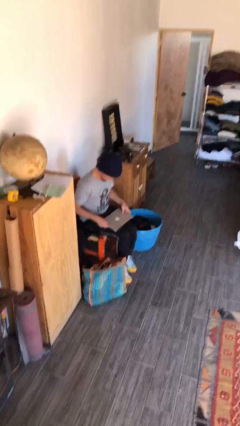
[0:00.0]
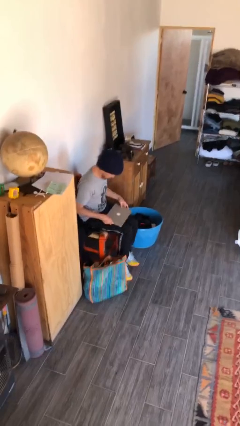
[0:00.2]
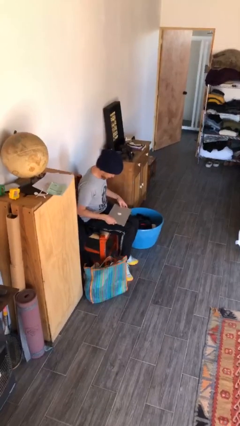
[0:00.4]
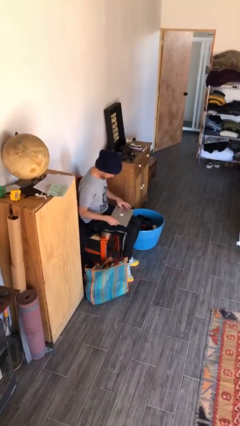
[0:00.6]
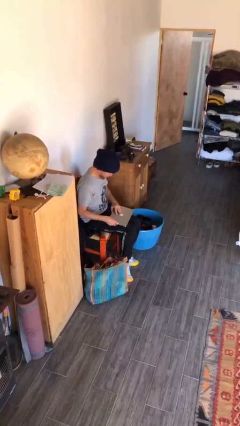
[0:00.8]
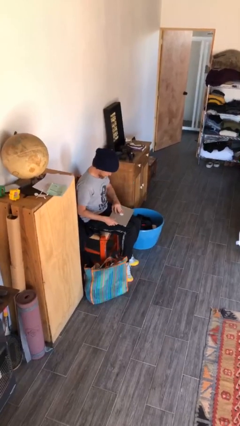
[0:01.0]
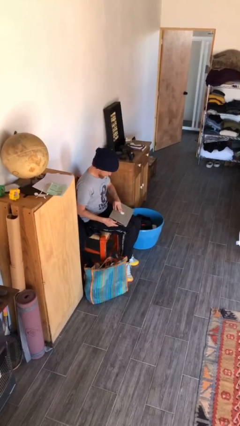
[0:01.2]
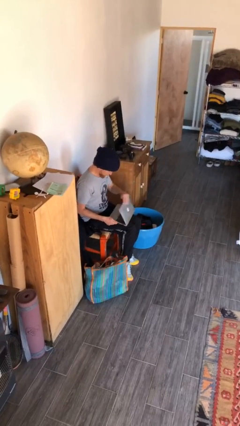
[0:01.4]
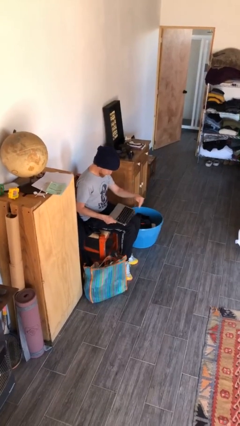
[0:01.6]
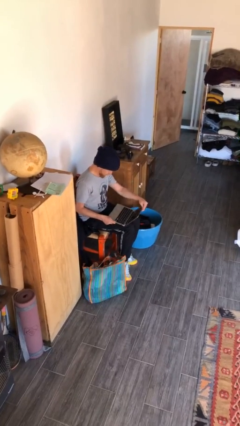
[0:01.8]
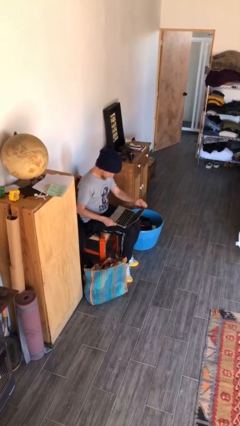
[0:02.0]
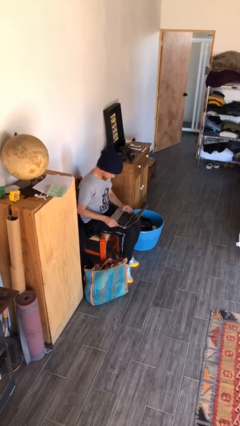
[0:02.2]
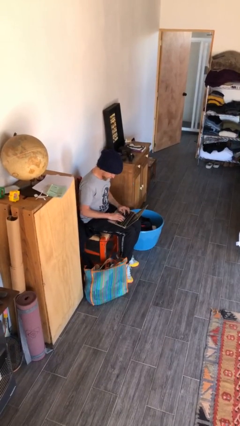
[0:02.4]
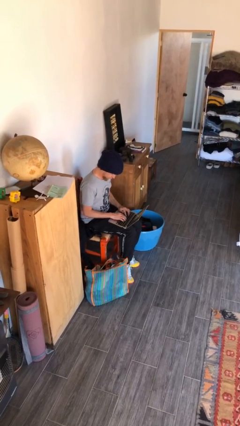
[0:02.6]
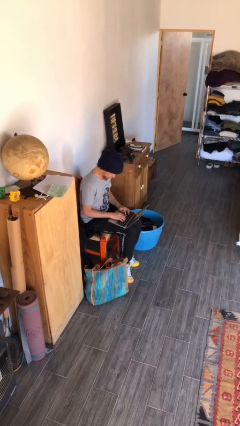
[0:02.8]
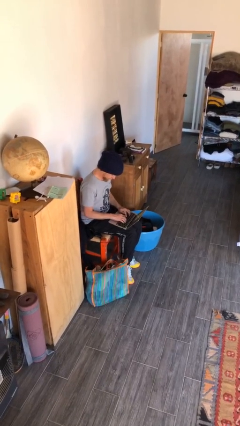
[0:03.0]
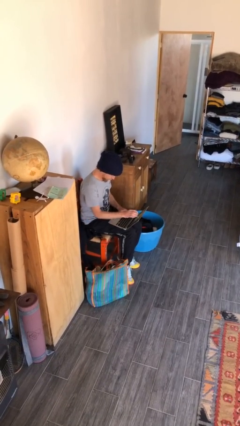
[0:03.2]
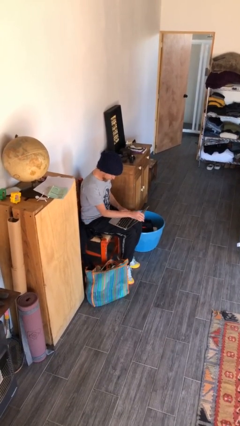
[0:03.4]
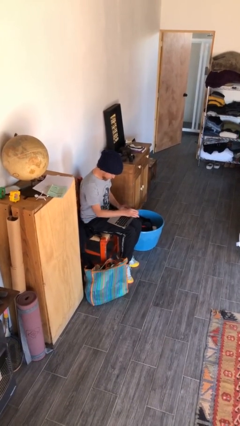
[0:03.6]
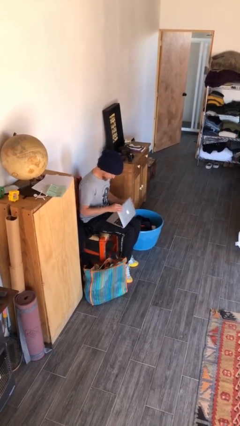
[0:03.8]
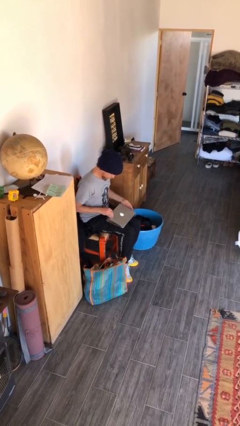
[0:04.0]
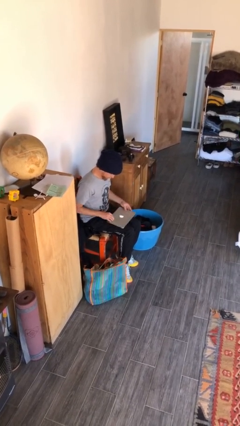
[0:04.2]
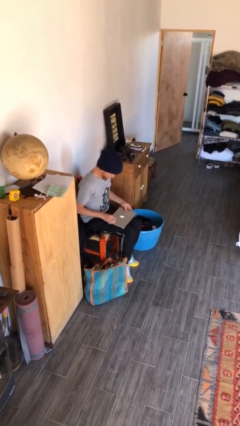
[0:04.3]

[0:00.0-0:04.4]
person interacts with laptop

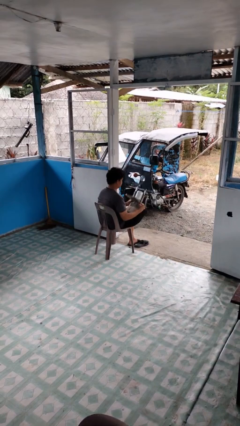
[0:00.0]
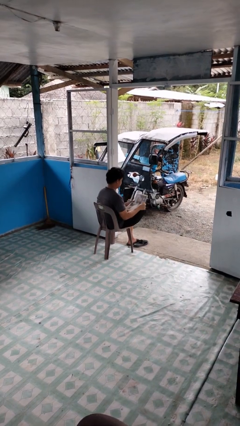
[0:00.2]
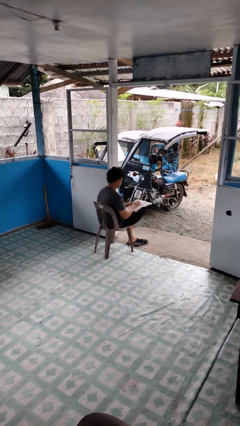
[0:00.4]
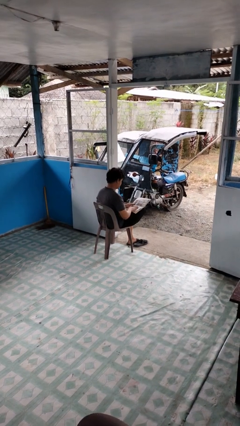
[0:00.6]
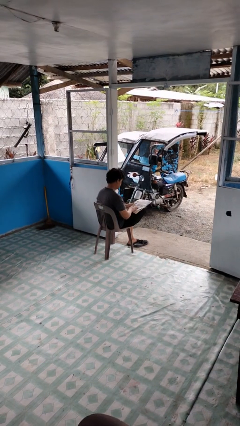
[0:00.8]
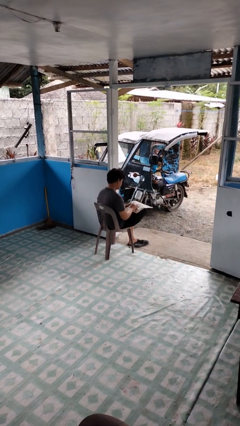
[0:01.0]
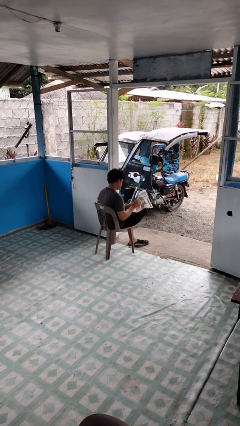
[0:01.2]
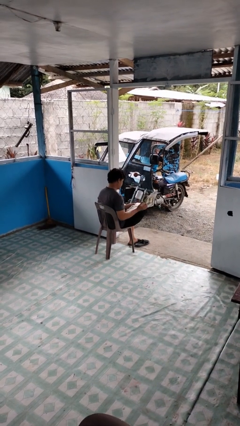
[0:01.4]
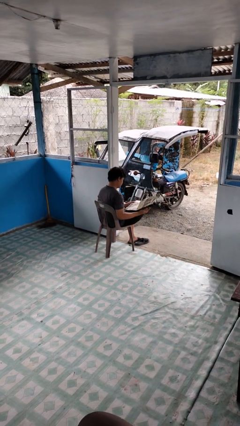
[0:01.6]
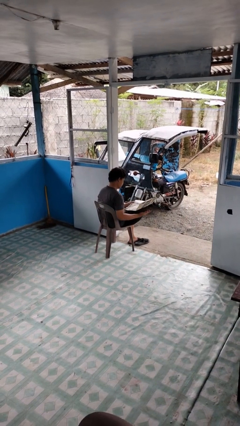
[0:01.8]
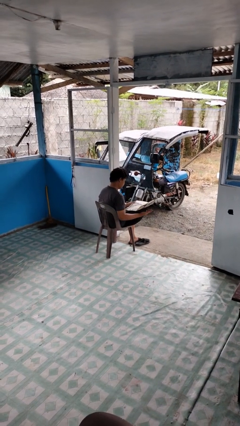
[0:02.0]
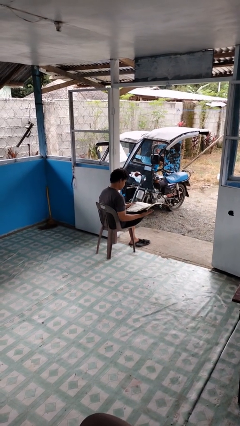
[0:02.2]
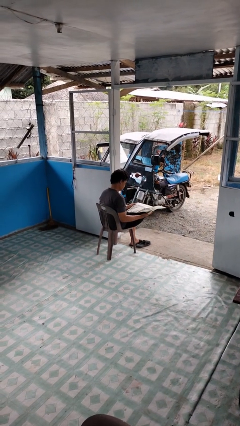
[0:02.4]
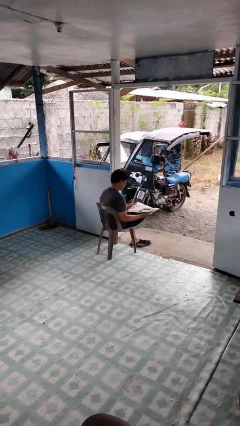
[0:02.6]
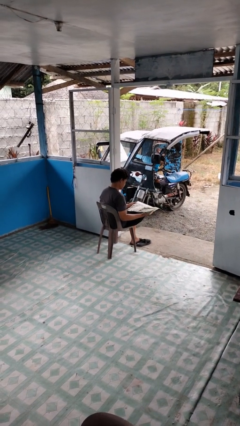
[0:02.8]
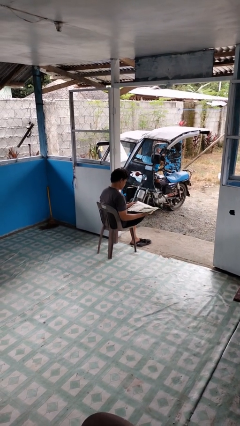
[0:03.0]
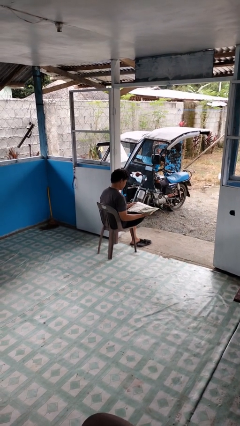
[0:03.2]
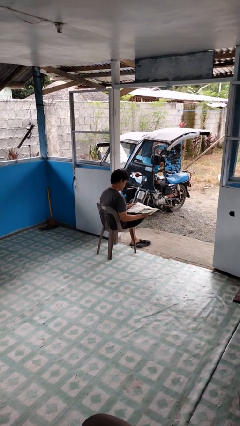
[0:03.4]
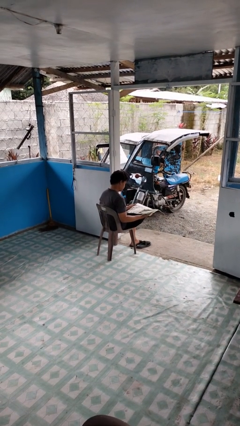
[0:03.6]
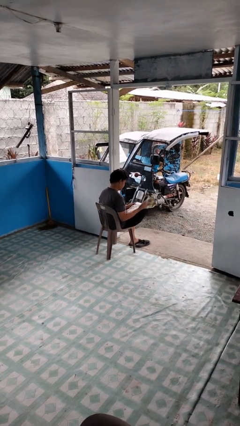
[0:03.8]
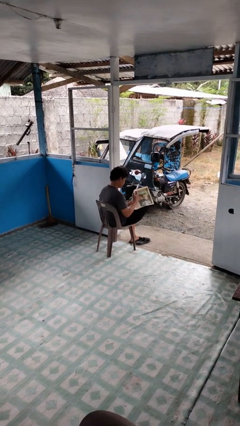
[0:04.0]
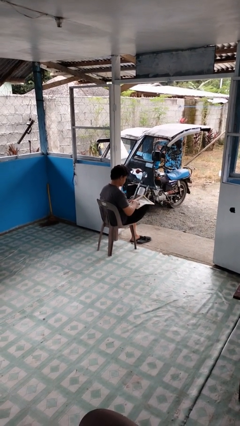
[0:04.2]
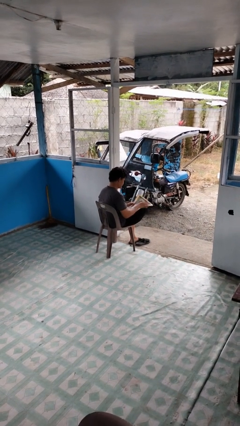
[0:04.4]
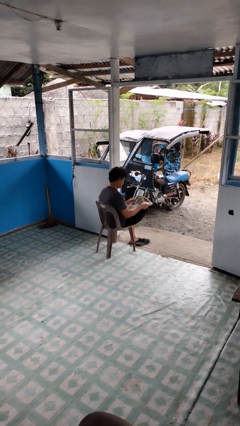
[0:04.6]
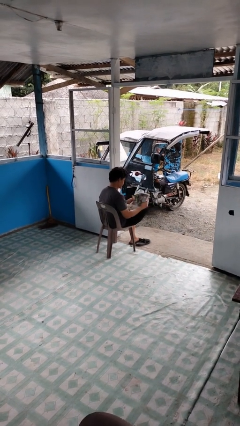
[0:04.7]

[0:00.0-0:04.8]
person reads newspaper

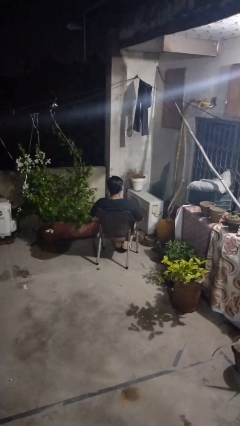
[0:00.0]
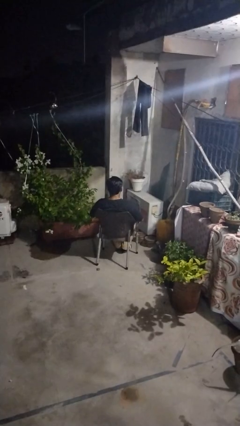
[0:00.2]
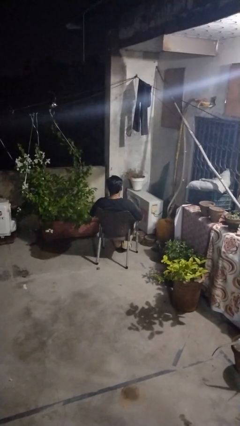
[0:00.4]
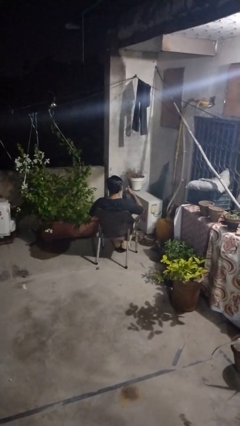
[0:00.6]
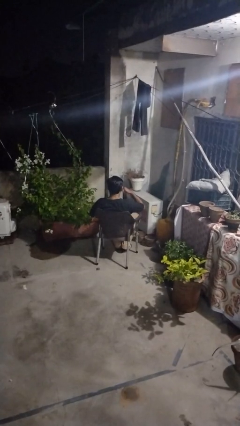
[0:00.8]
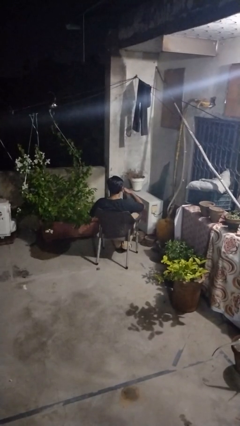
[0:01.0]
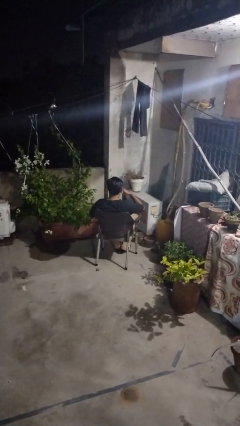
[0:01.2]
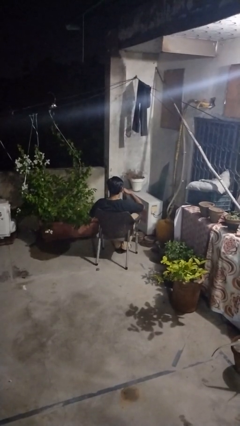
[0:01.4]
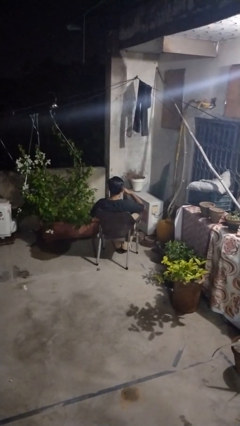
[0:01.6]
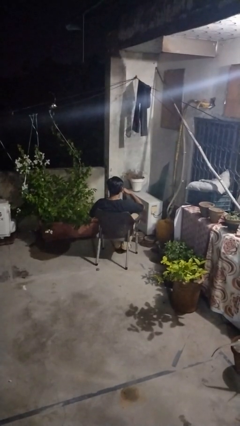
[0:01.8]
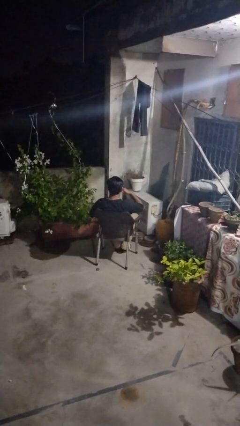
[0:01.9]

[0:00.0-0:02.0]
person gestures call me

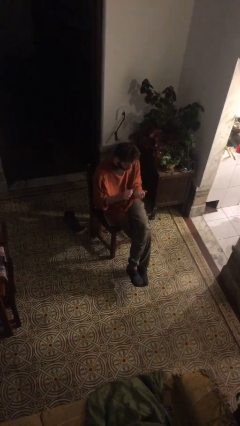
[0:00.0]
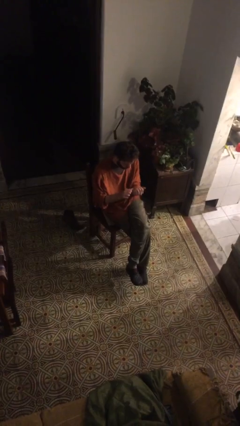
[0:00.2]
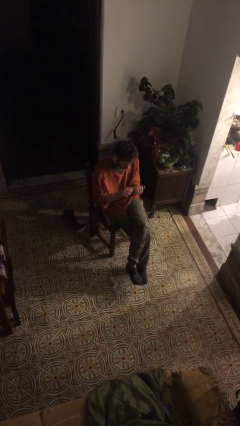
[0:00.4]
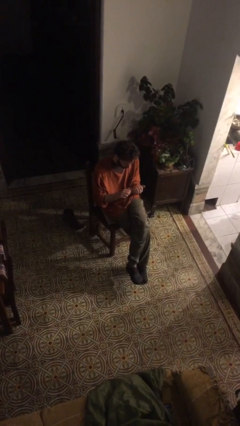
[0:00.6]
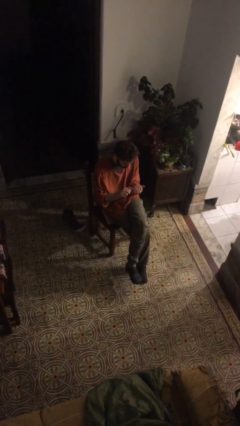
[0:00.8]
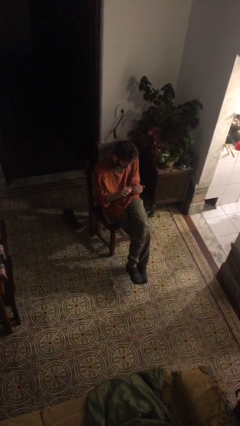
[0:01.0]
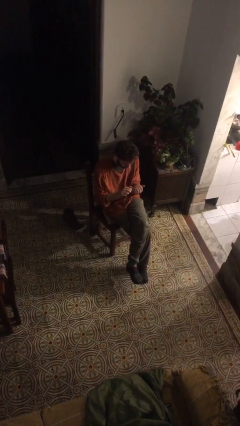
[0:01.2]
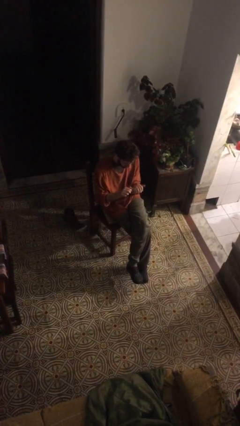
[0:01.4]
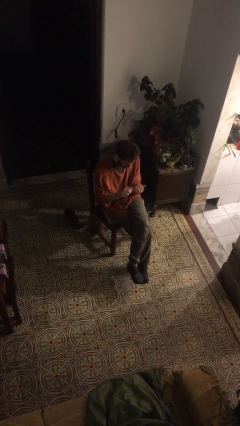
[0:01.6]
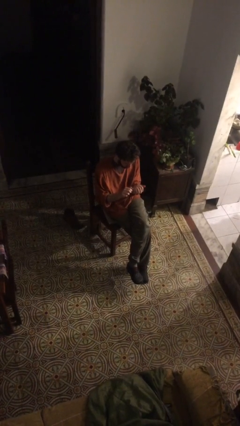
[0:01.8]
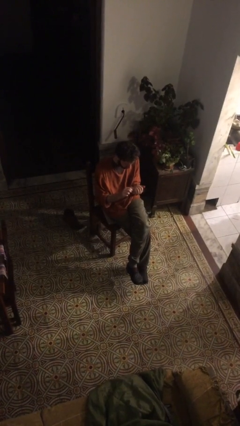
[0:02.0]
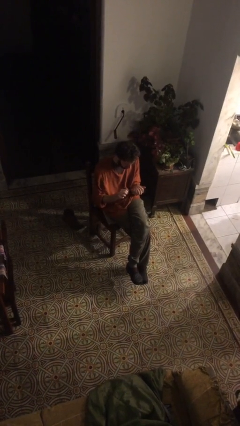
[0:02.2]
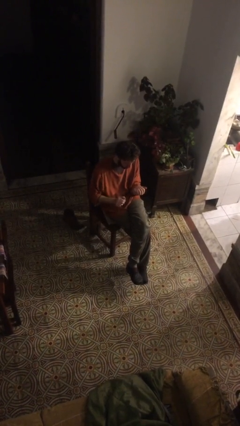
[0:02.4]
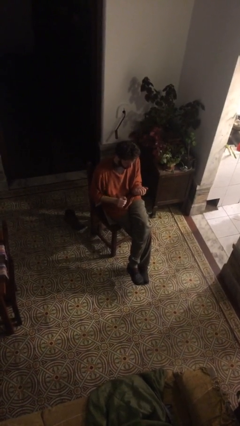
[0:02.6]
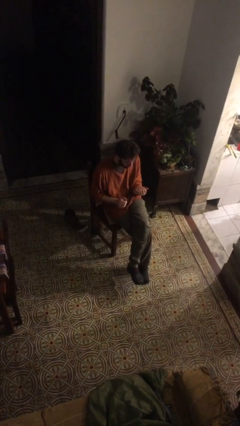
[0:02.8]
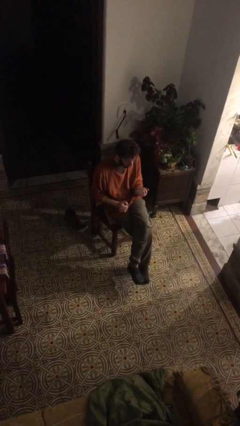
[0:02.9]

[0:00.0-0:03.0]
person files fingernails

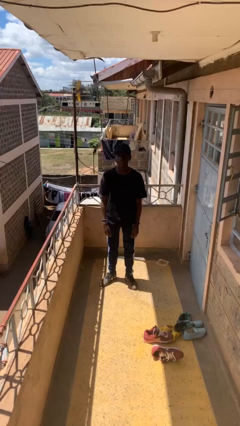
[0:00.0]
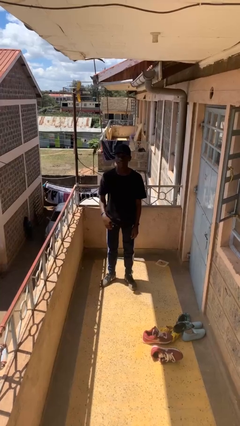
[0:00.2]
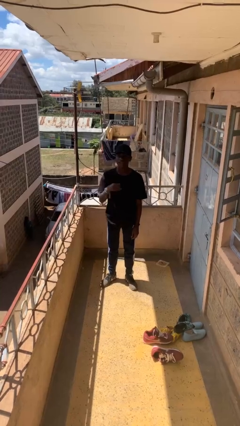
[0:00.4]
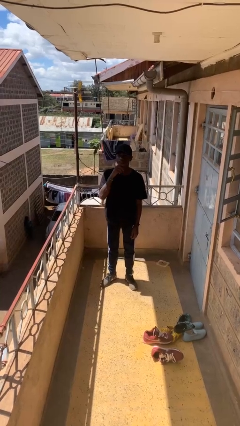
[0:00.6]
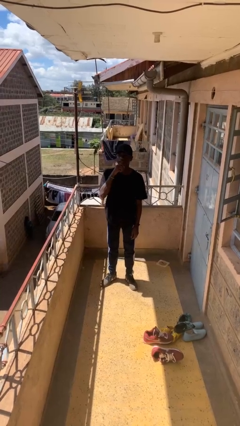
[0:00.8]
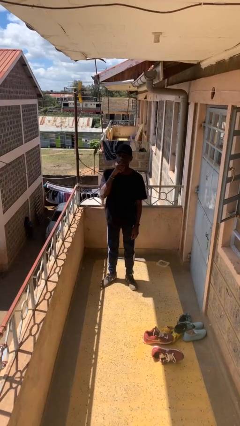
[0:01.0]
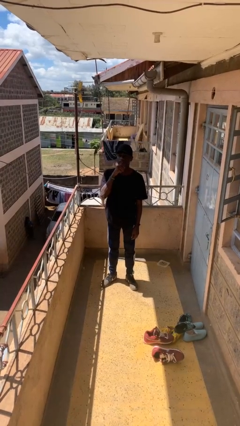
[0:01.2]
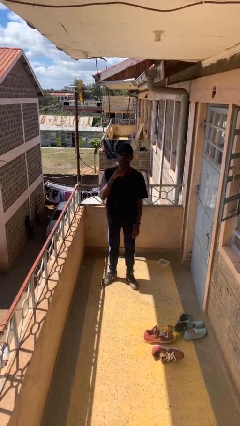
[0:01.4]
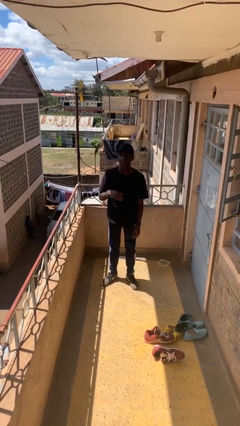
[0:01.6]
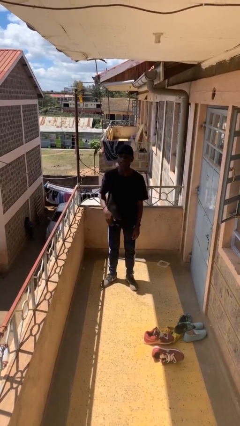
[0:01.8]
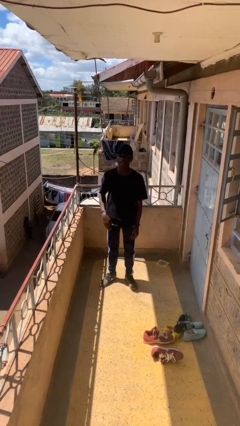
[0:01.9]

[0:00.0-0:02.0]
person strokes chin

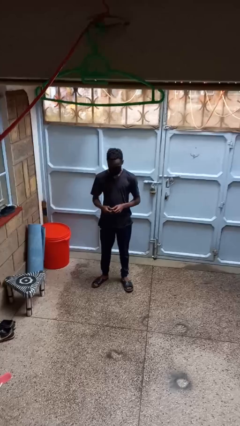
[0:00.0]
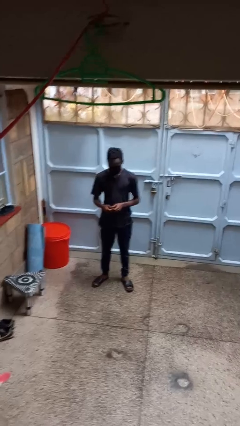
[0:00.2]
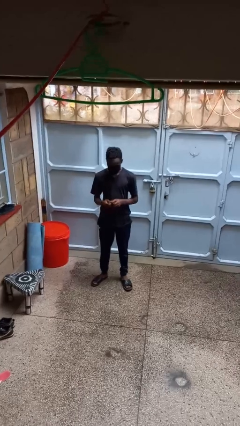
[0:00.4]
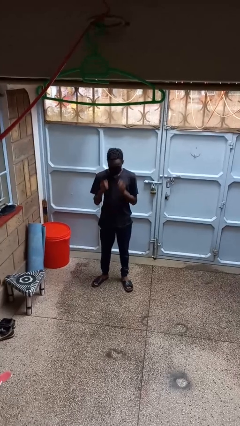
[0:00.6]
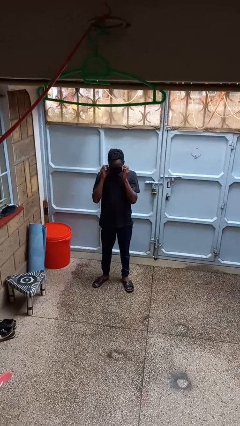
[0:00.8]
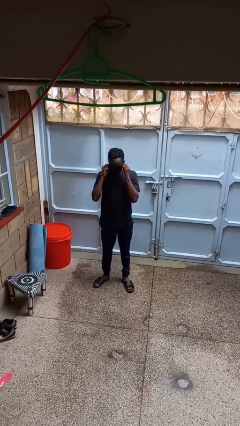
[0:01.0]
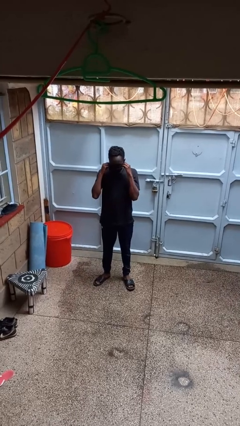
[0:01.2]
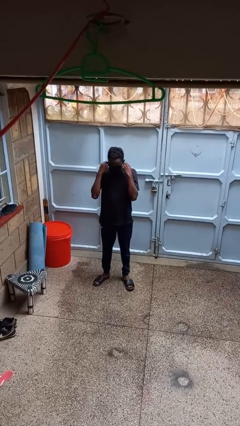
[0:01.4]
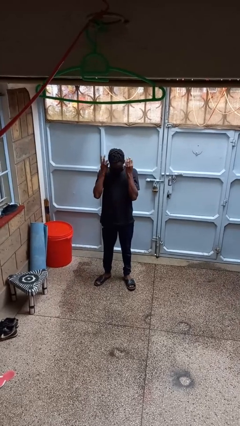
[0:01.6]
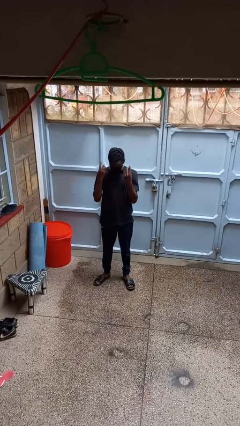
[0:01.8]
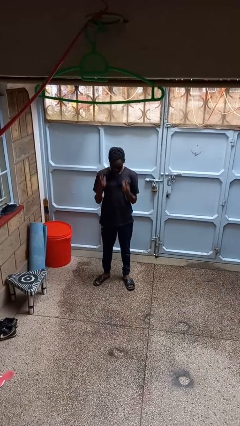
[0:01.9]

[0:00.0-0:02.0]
person takes off facemask
